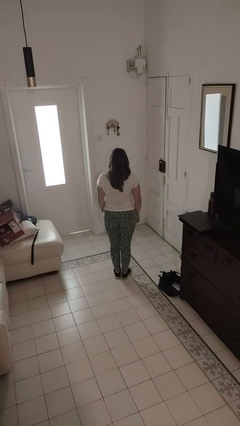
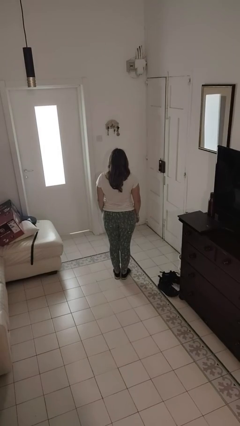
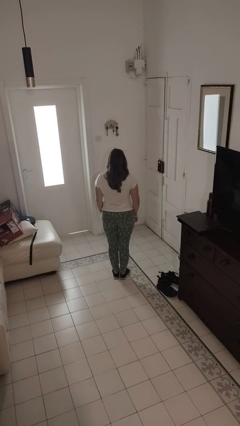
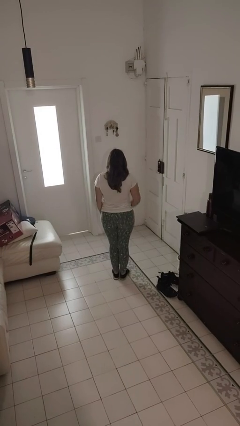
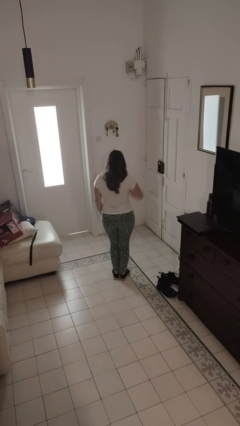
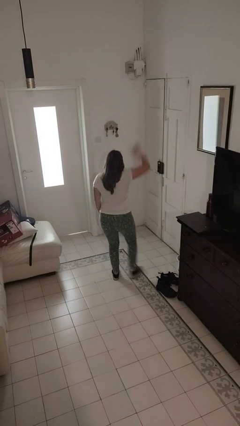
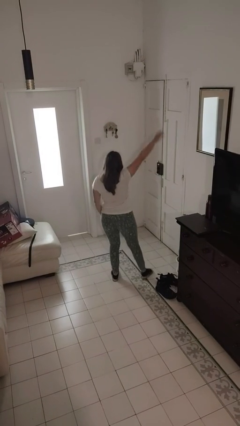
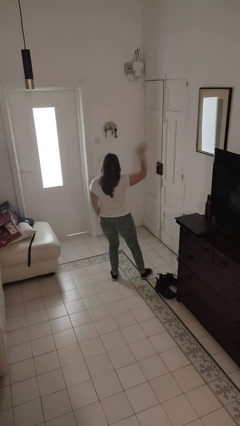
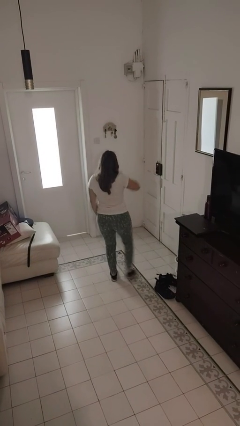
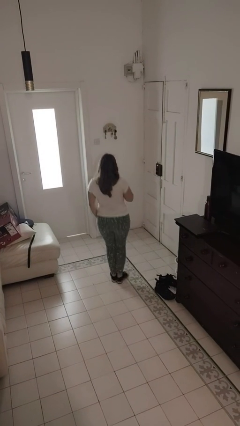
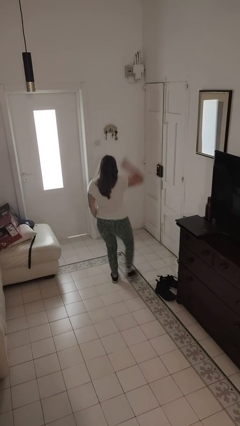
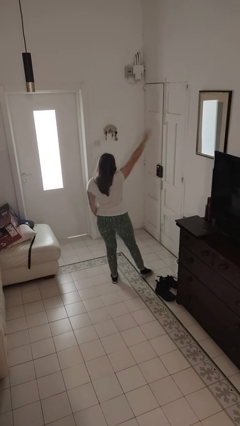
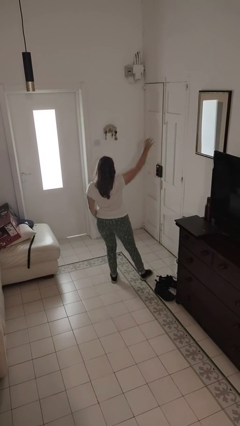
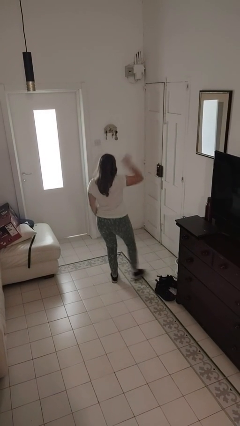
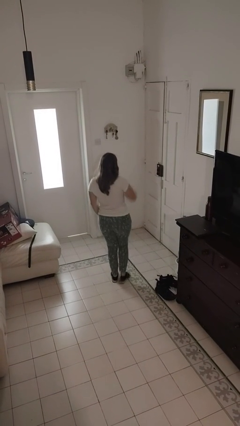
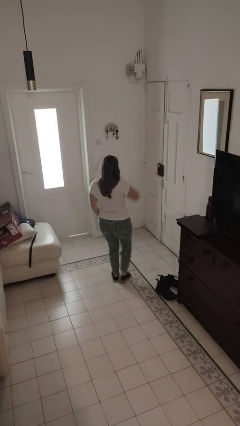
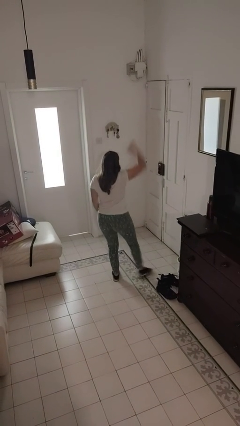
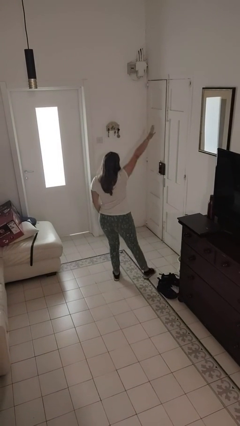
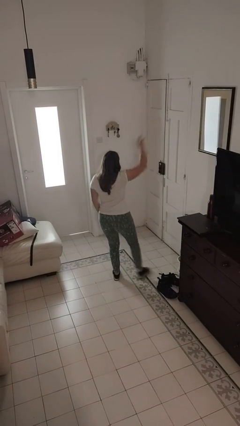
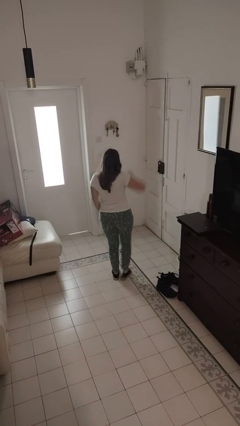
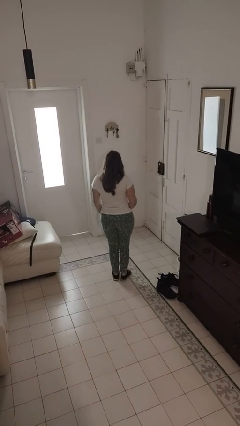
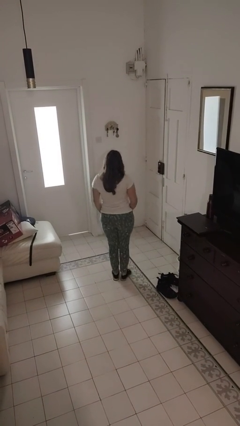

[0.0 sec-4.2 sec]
person dances in place

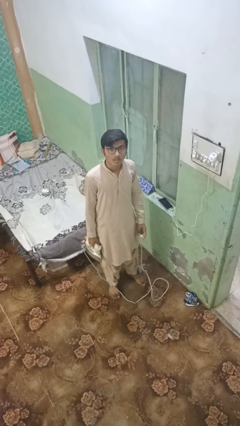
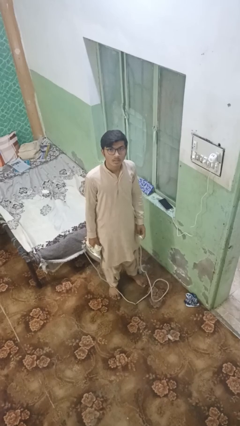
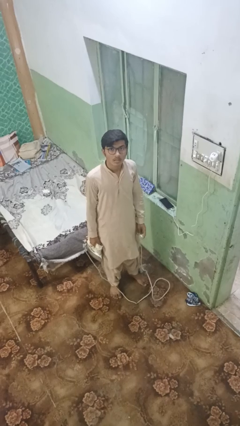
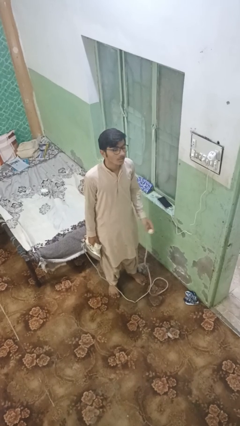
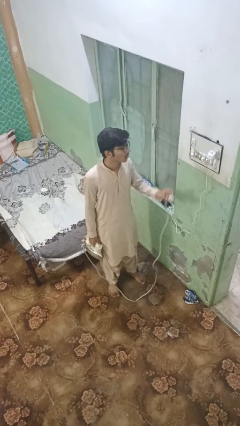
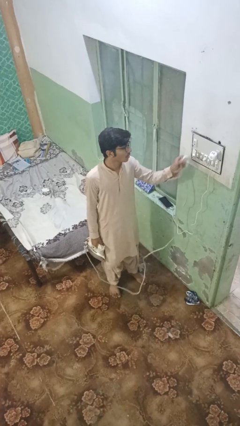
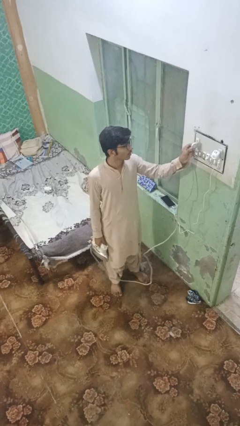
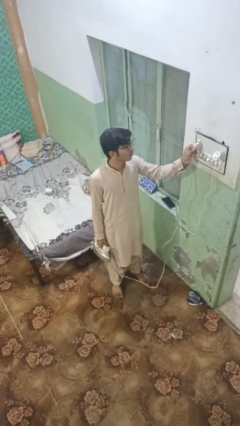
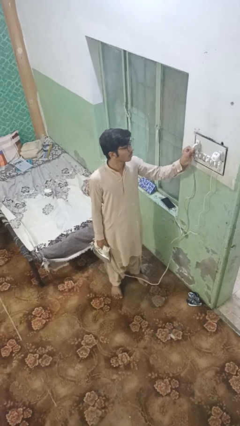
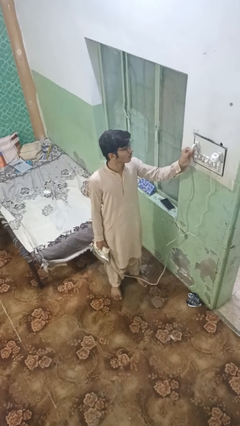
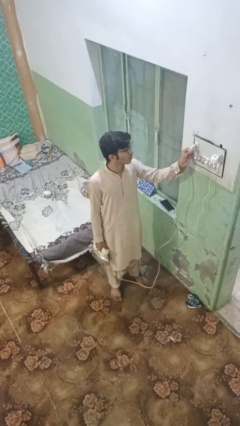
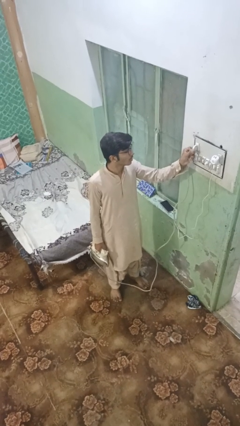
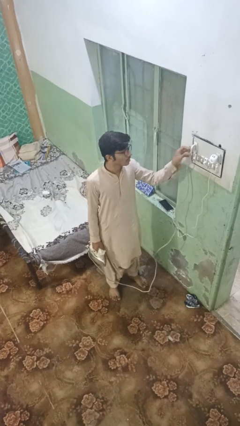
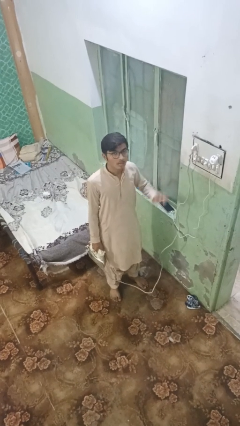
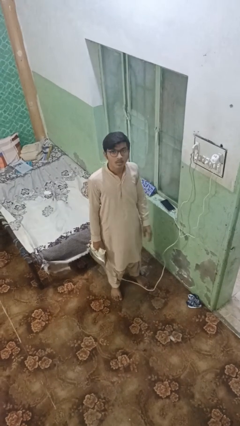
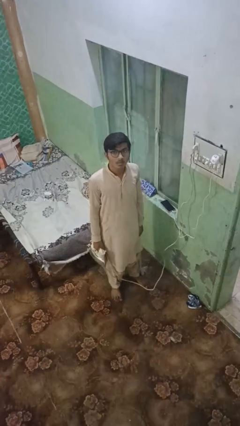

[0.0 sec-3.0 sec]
person plugs into electrical socket

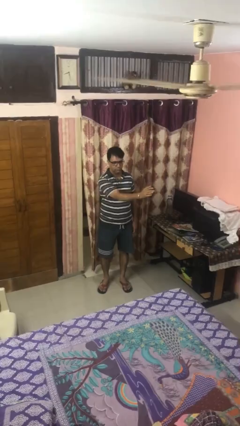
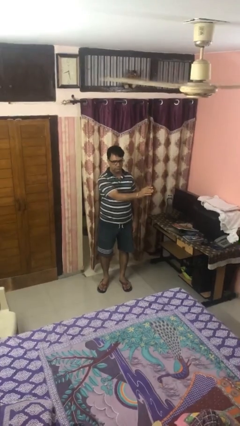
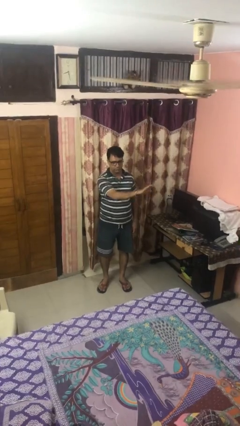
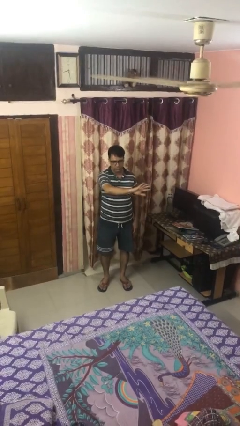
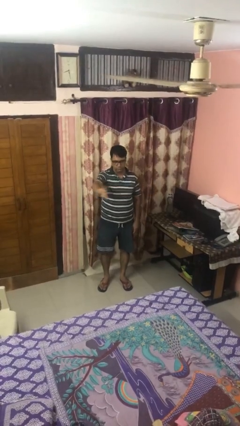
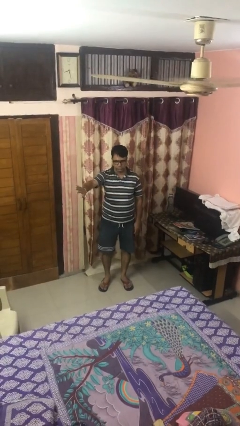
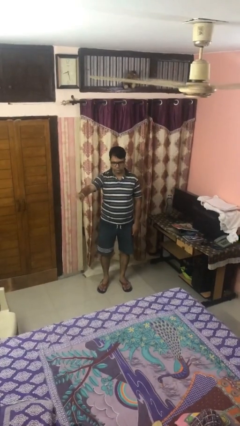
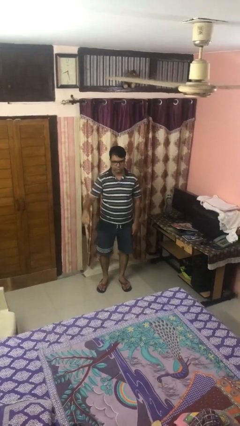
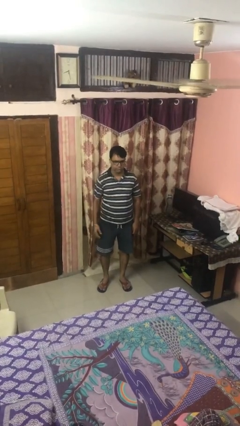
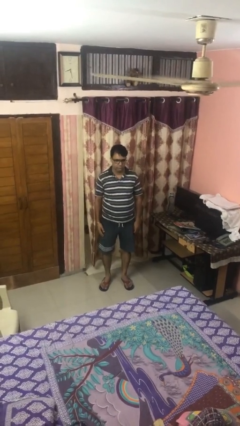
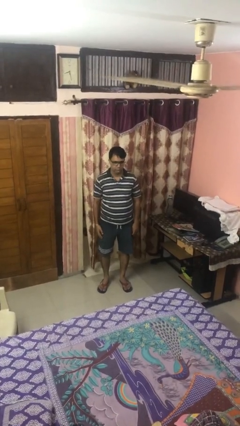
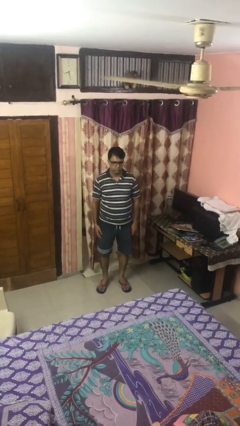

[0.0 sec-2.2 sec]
person gestures swipe right

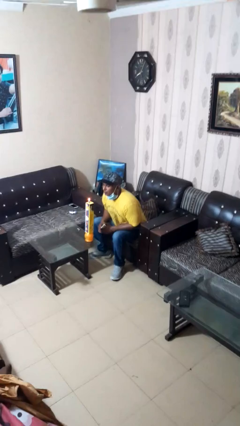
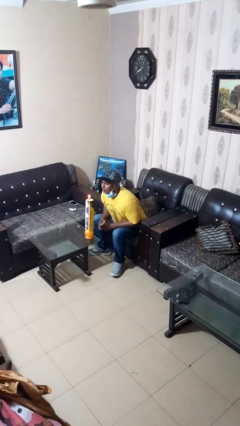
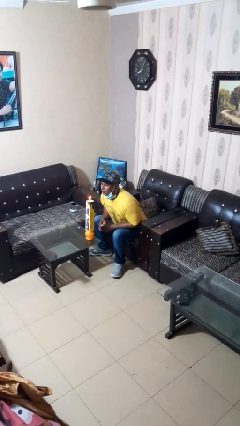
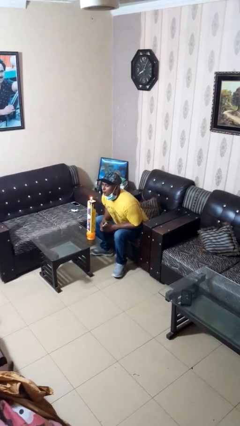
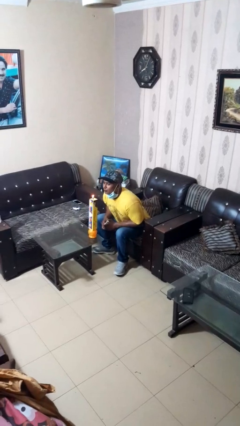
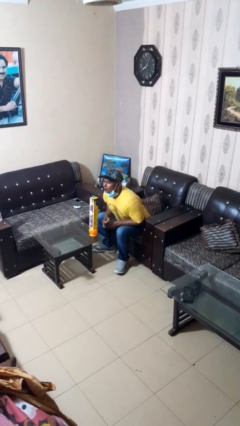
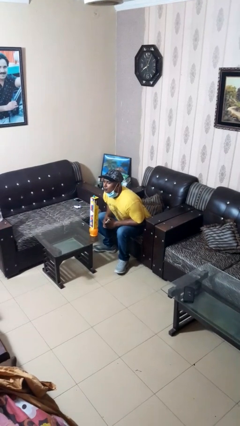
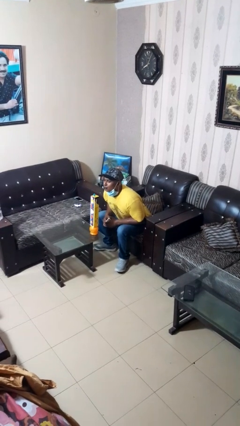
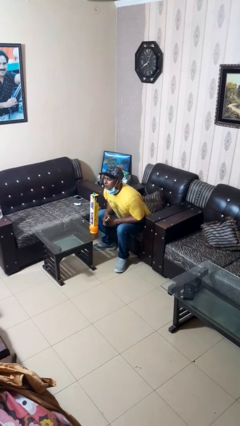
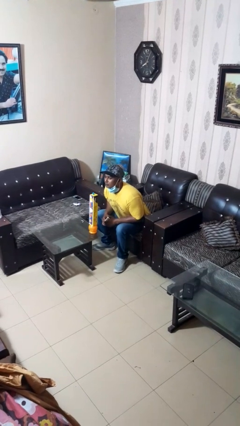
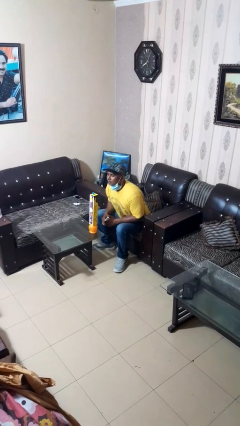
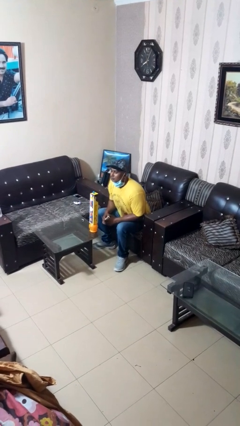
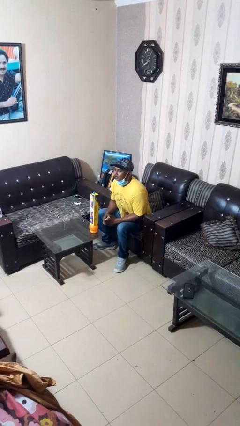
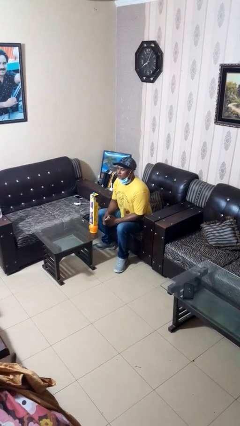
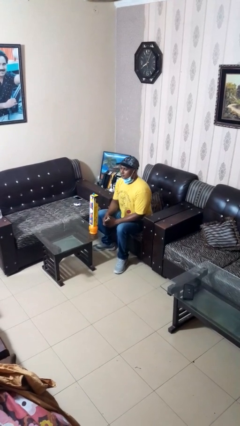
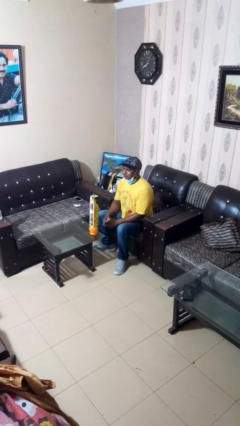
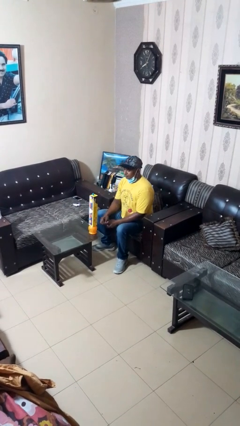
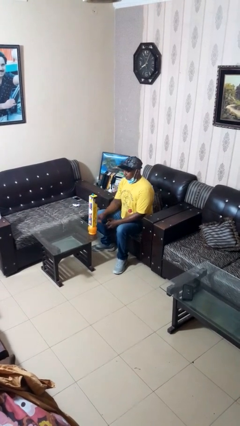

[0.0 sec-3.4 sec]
person extinguishes candle

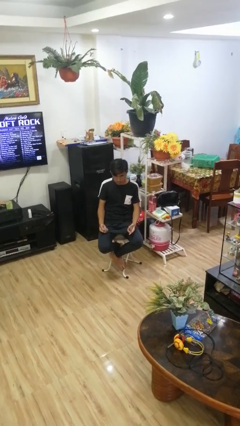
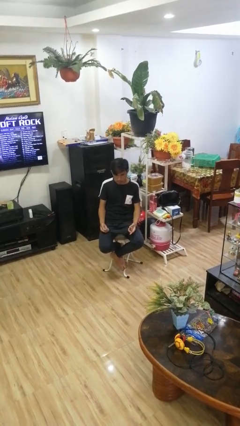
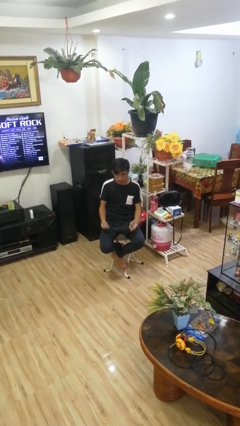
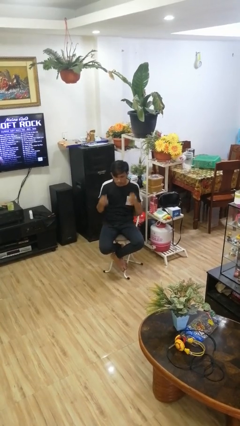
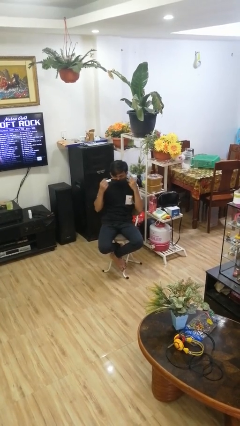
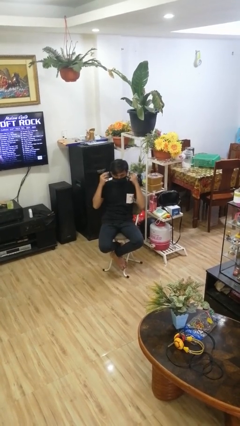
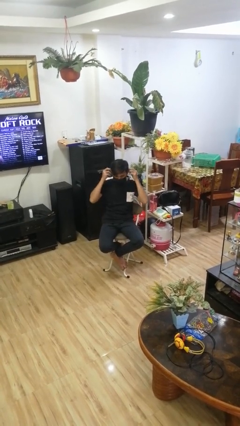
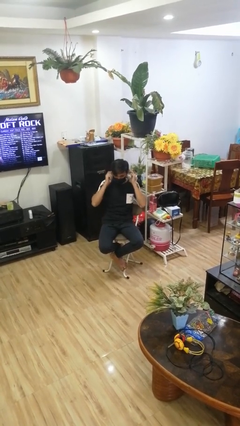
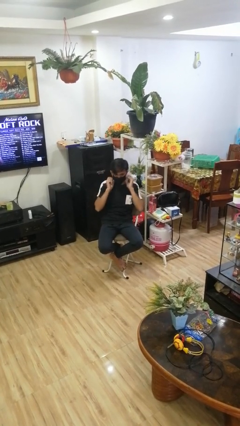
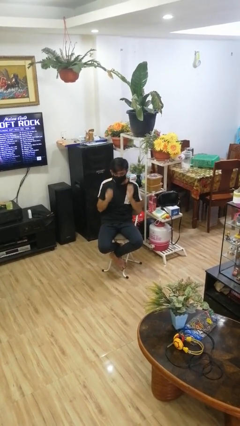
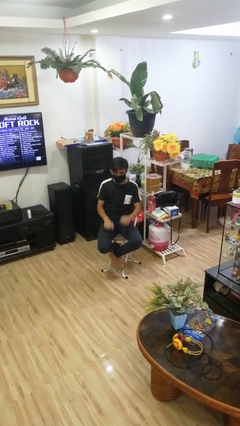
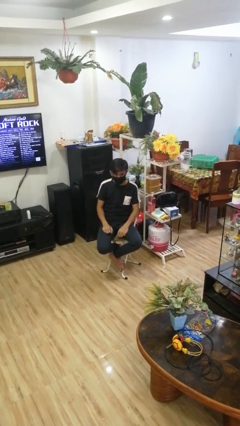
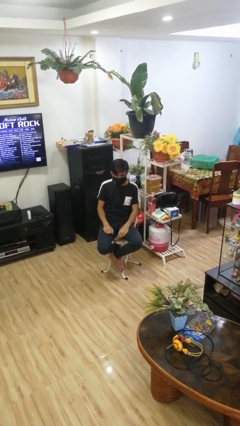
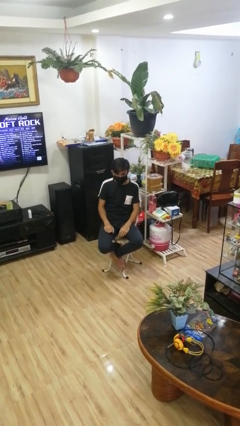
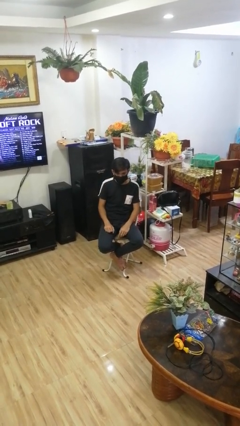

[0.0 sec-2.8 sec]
person puts on facemask

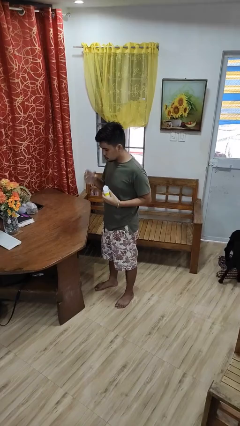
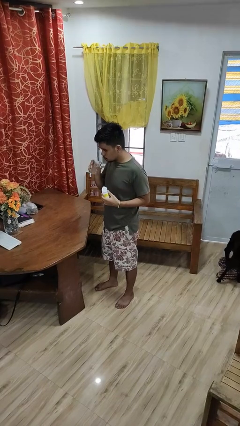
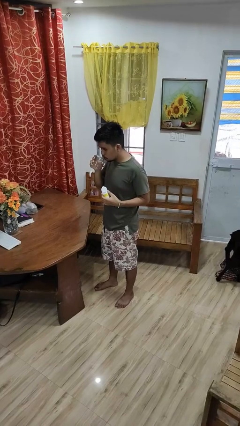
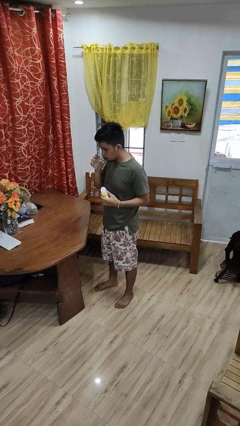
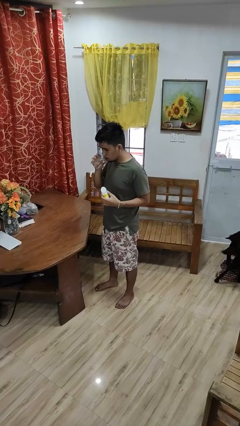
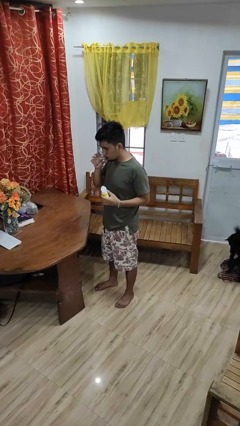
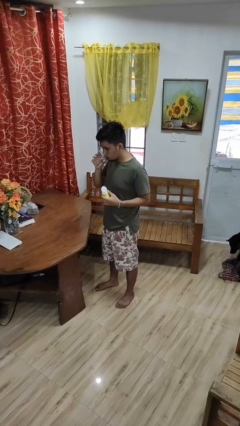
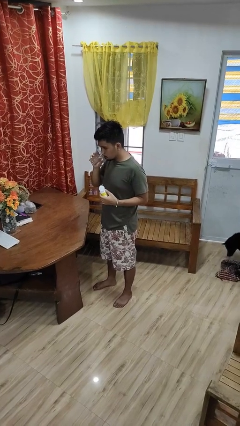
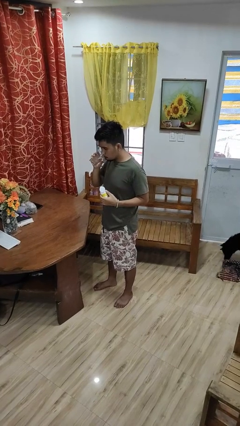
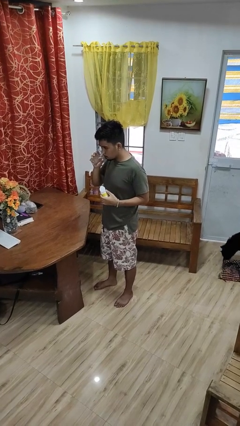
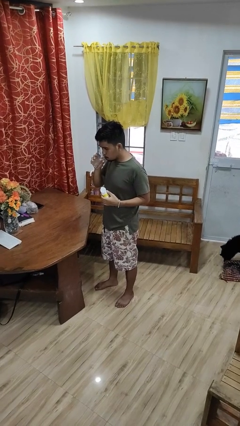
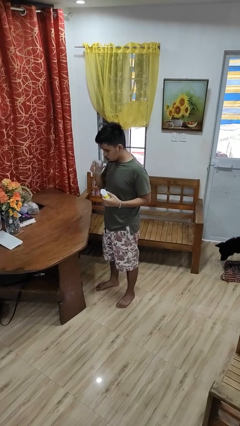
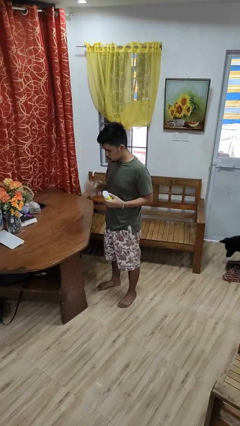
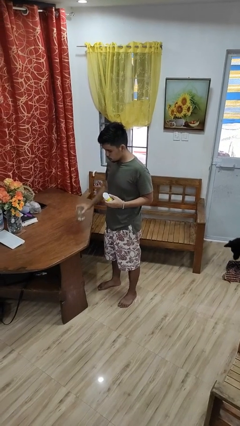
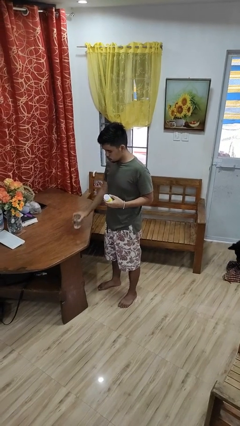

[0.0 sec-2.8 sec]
person drinks from cup
